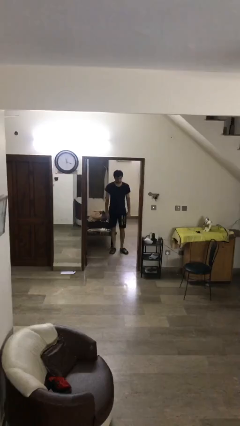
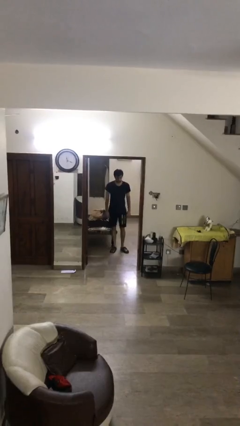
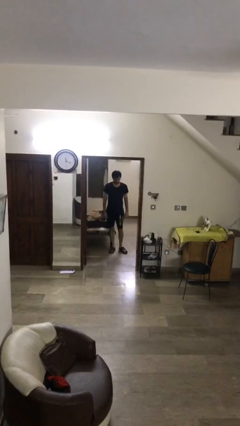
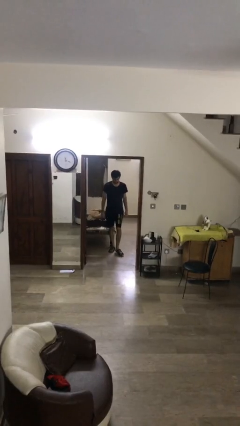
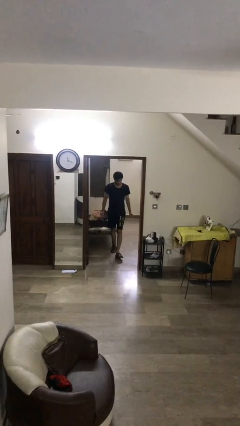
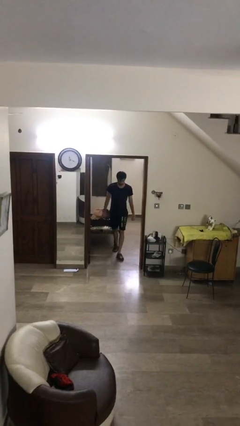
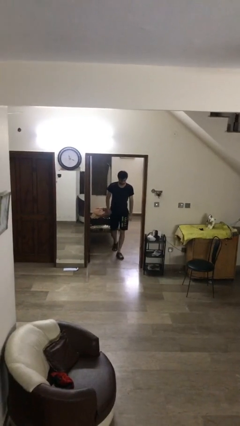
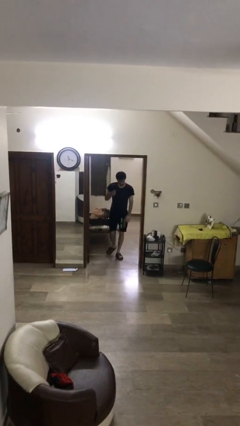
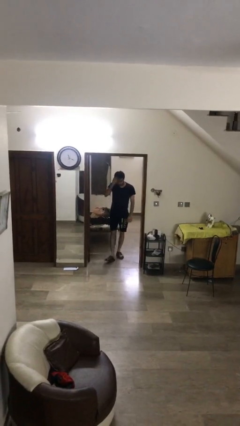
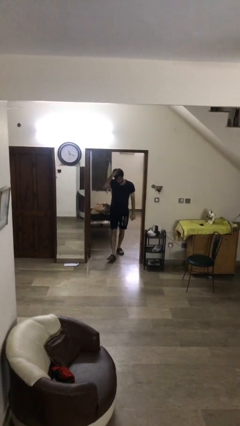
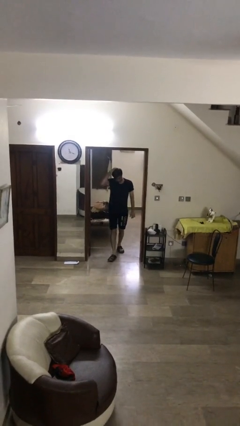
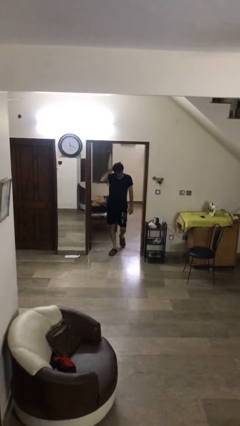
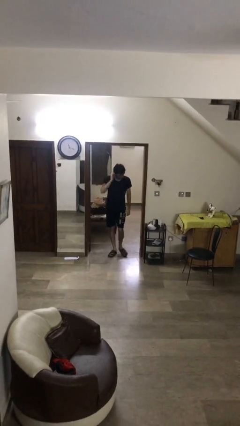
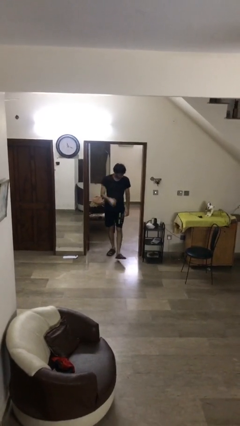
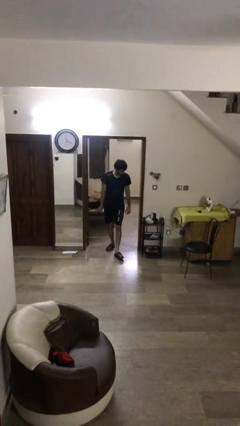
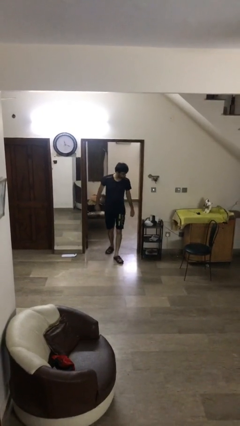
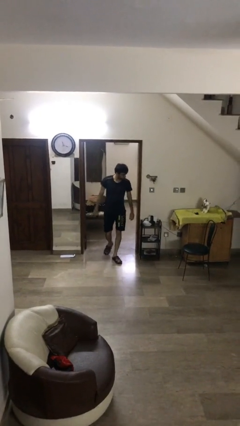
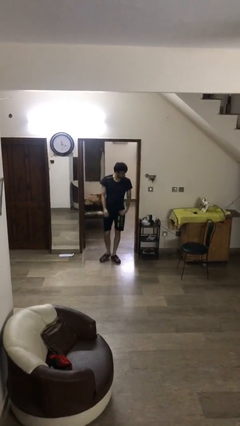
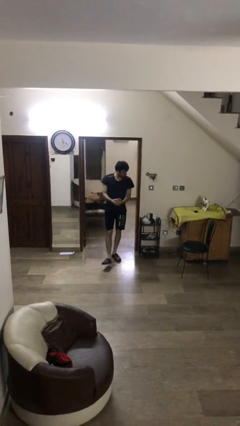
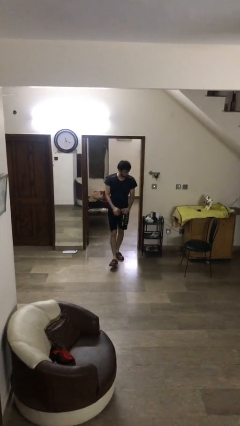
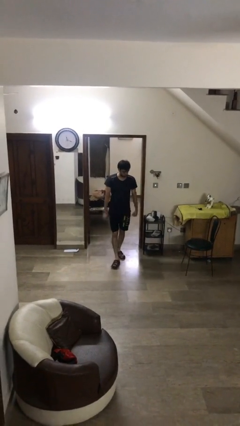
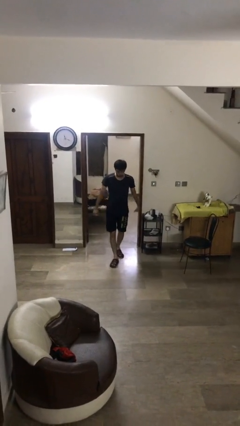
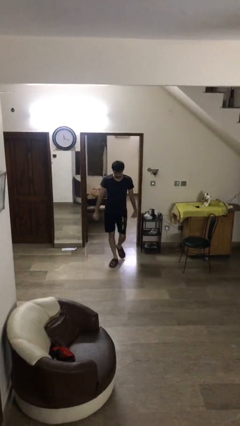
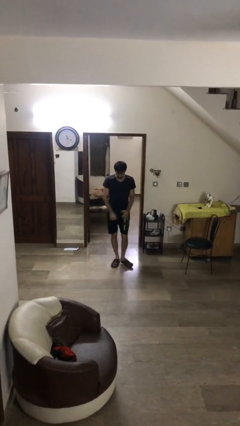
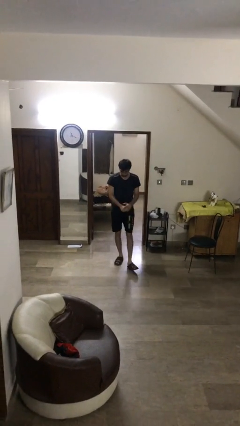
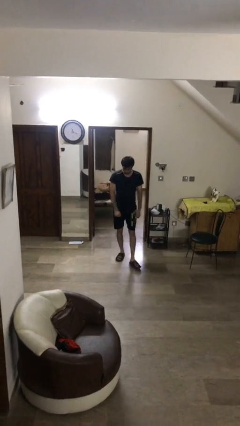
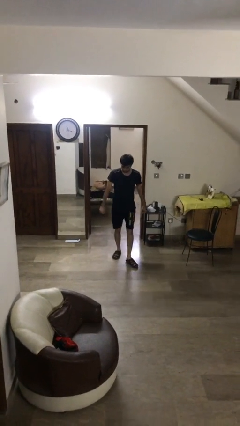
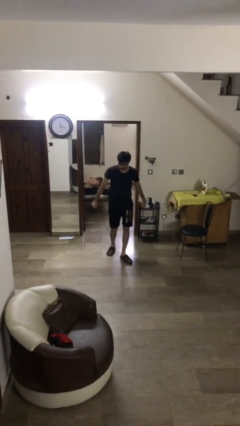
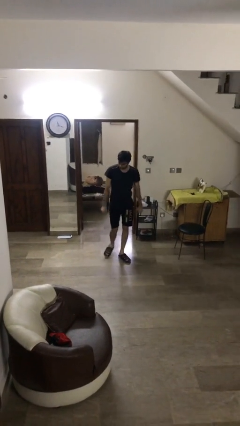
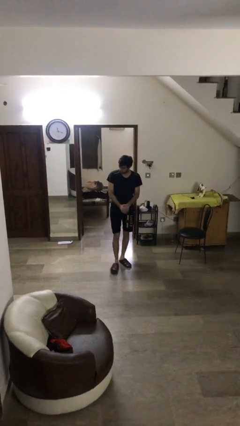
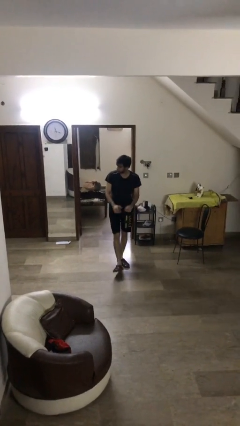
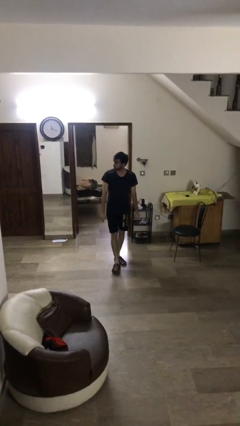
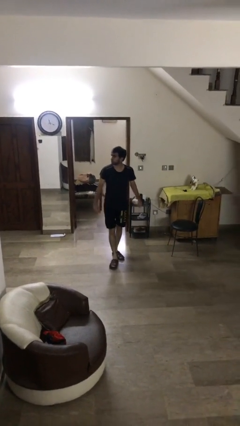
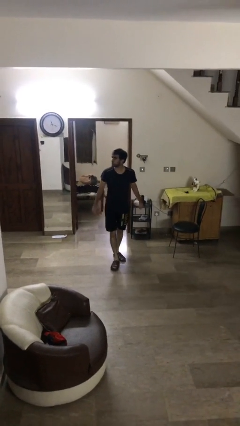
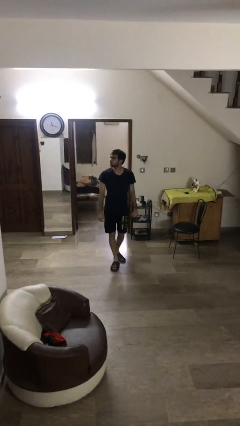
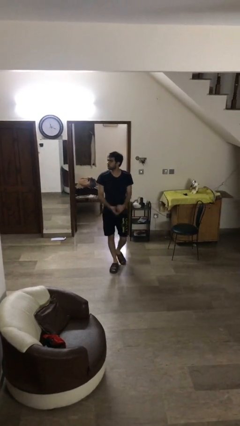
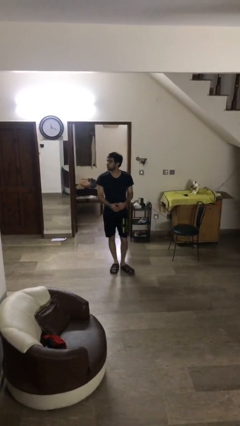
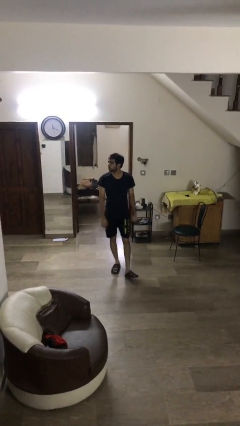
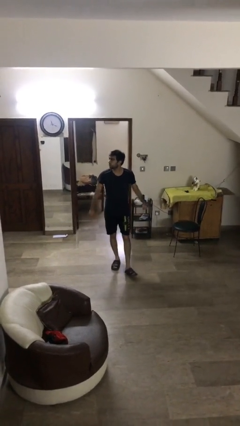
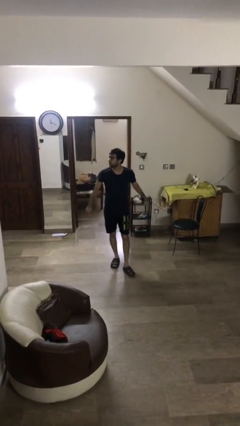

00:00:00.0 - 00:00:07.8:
person enters scene through structure

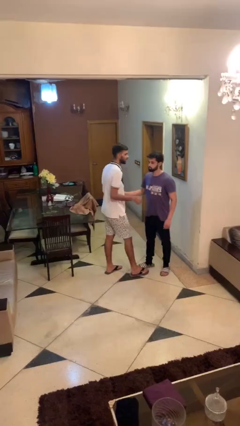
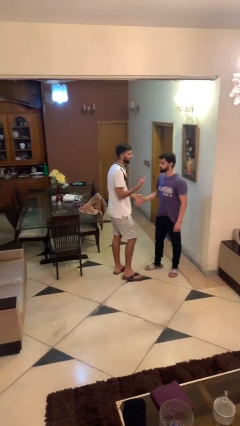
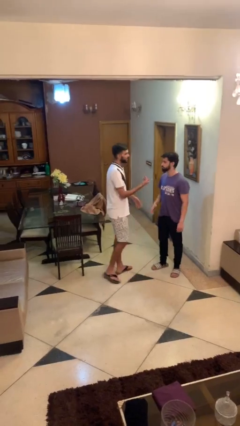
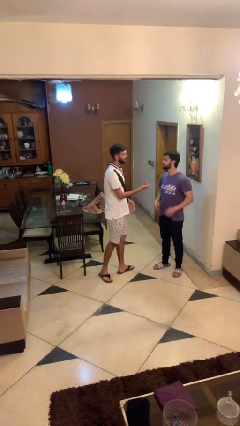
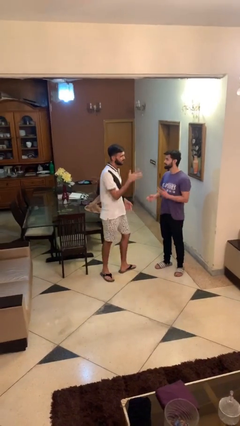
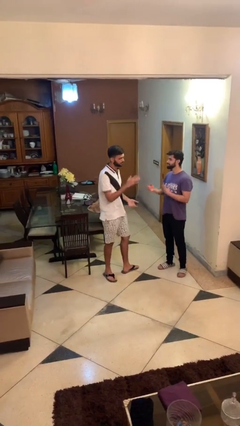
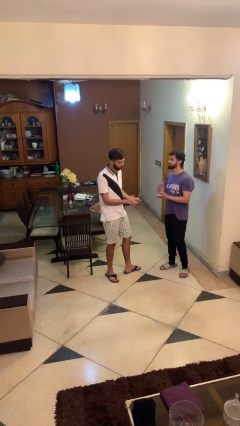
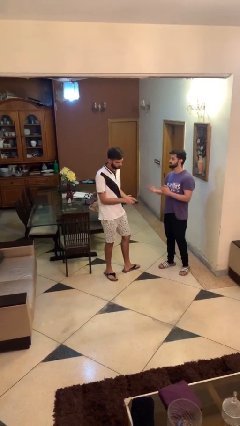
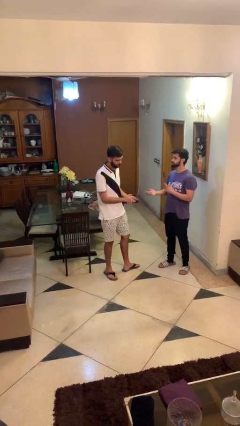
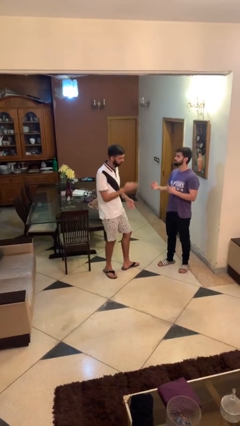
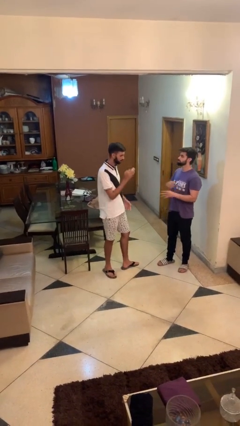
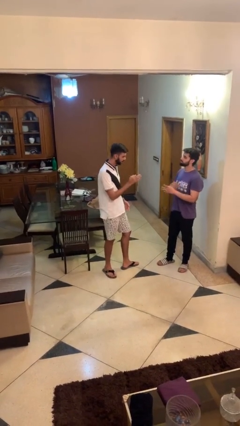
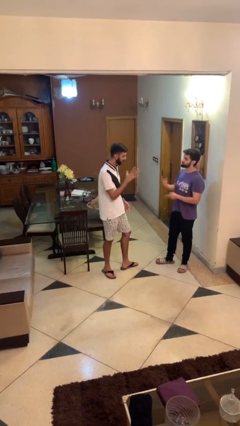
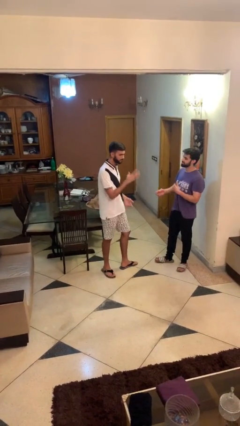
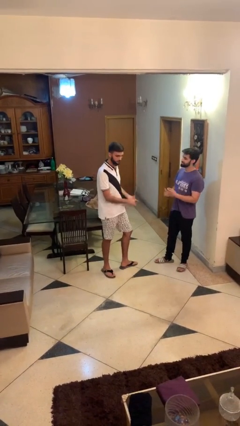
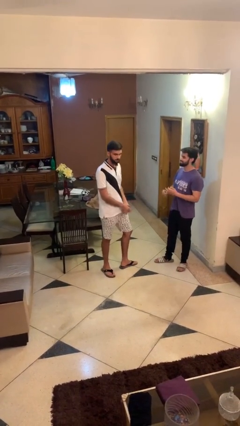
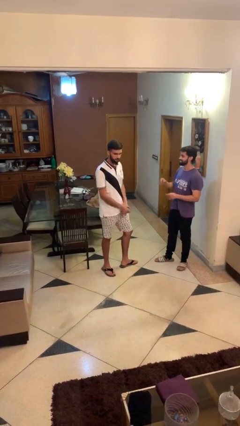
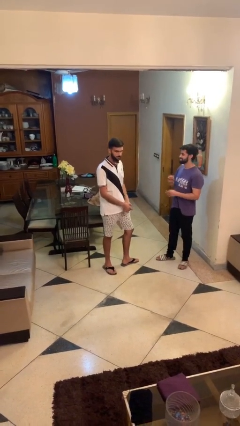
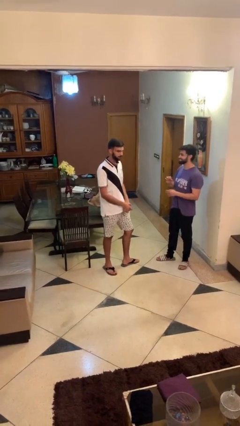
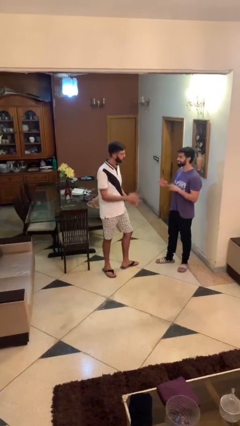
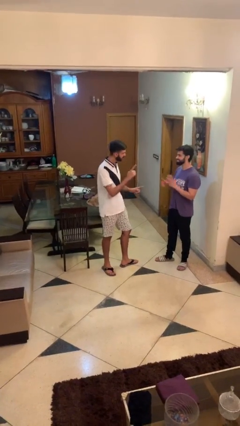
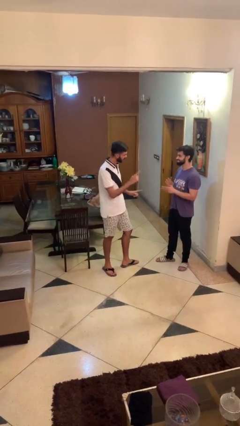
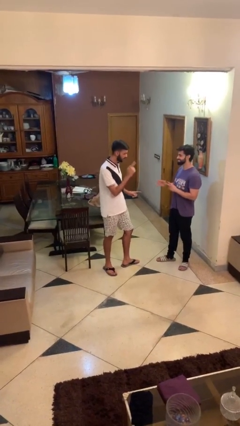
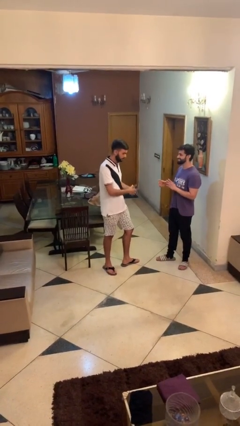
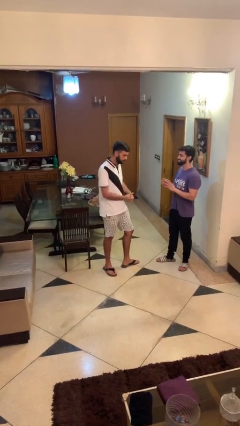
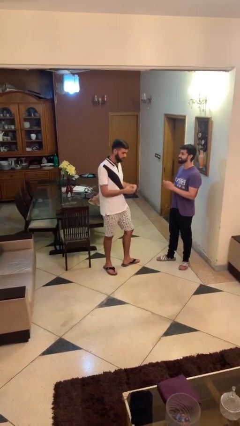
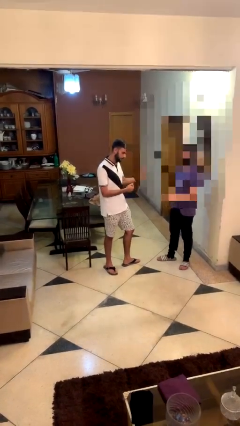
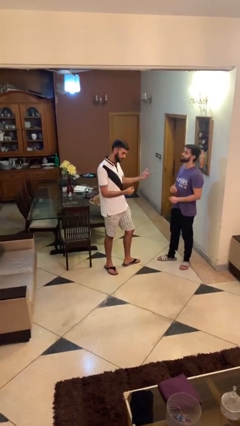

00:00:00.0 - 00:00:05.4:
person talks to person

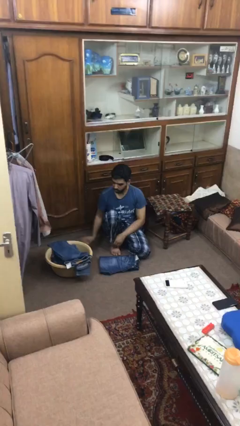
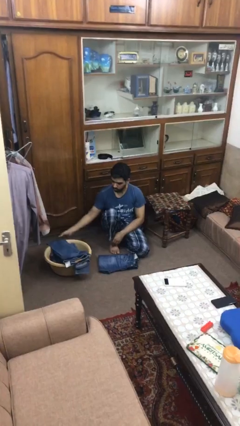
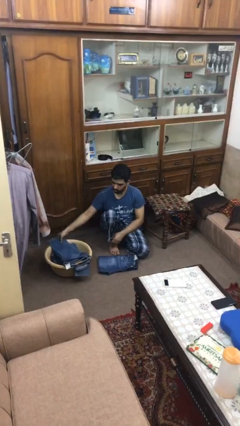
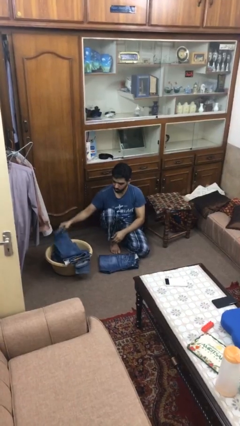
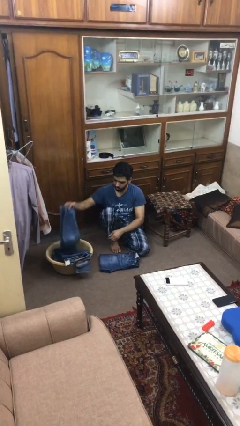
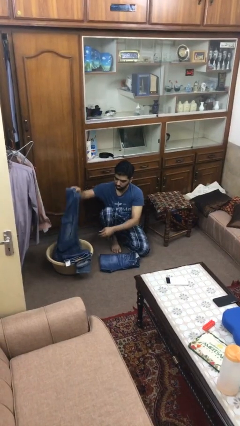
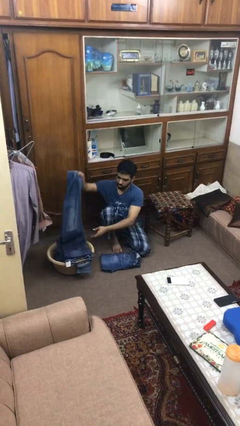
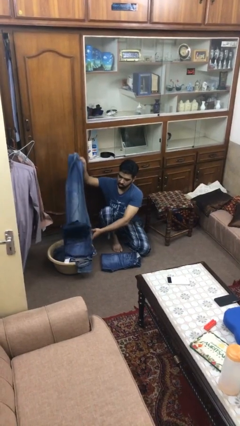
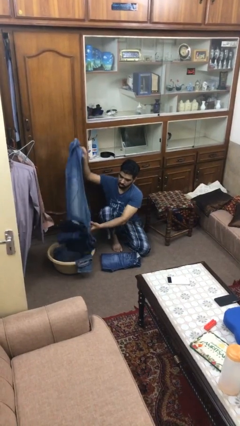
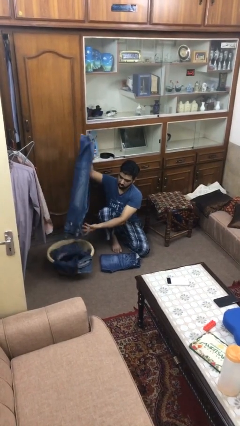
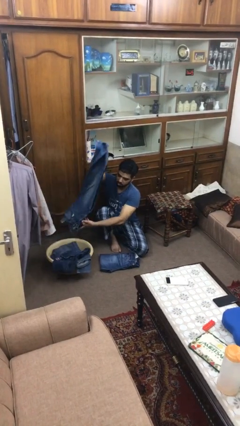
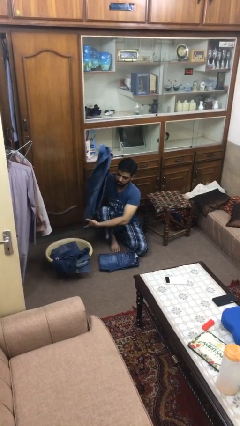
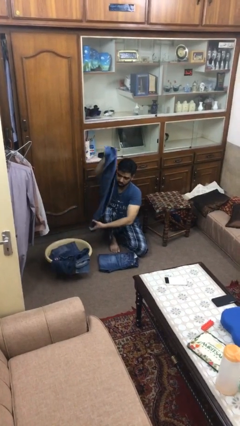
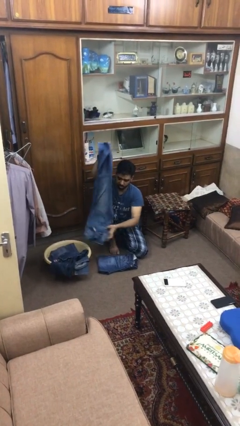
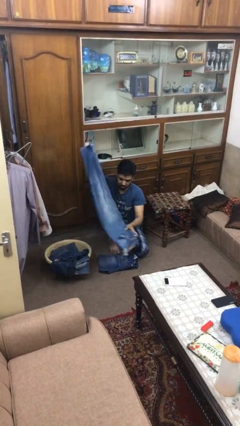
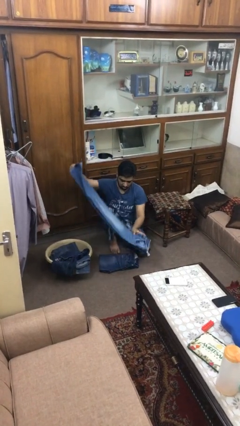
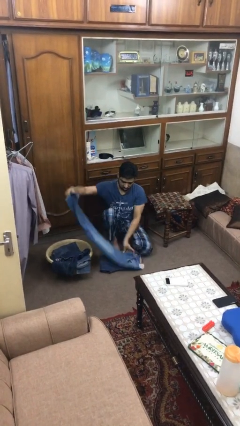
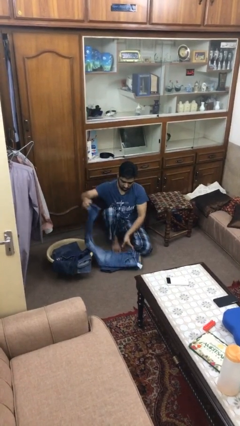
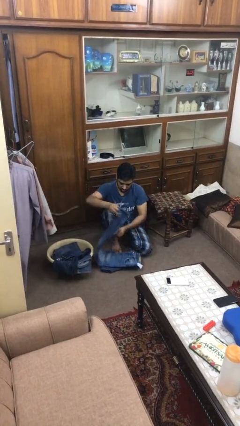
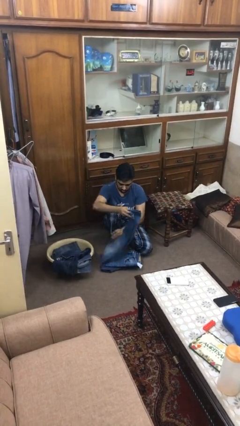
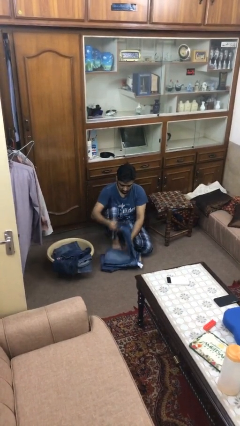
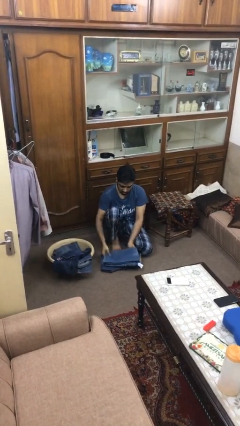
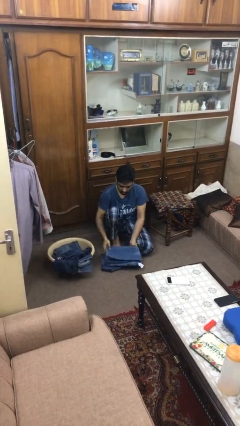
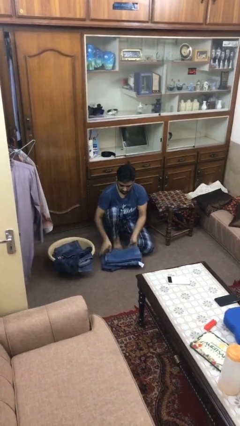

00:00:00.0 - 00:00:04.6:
person folds pants
